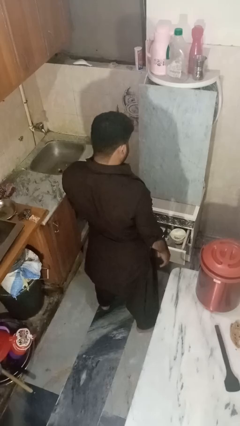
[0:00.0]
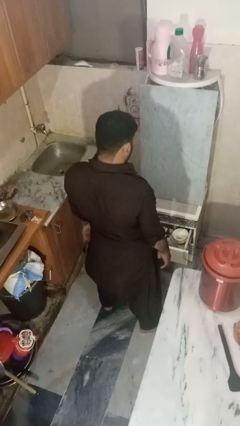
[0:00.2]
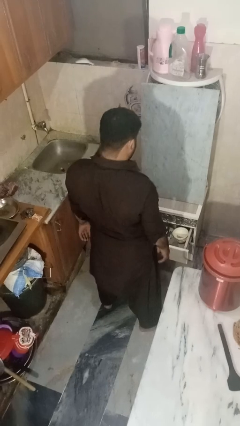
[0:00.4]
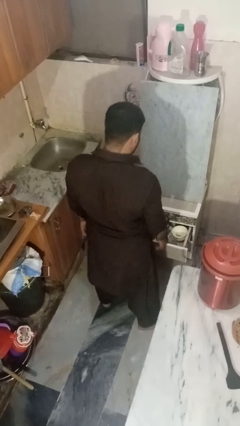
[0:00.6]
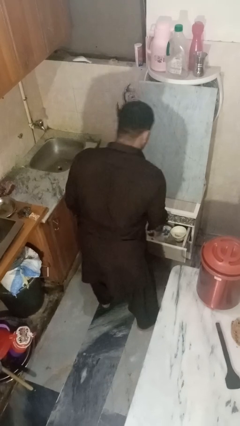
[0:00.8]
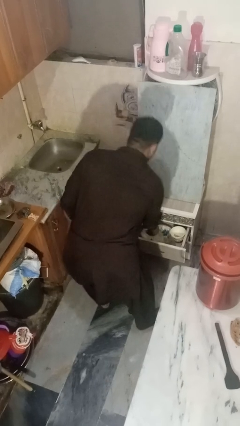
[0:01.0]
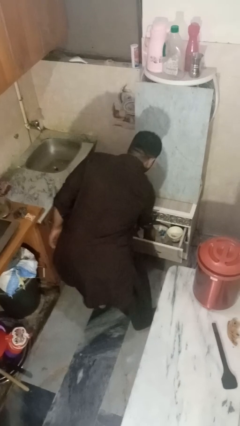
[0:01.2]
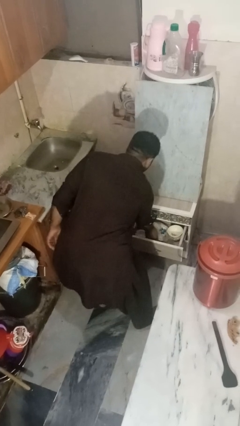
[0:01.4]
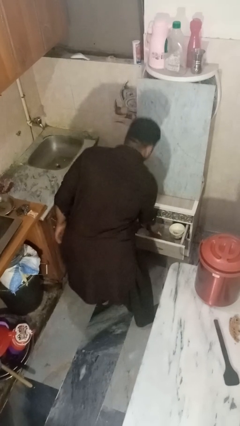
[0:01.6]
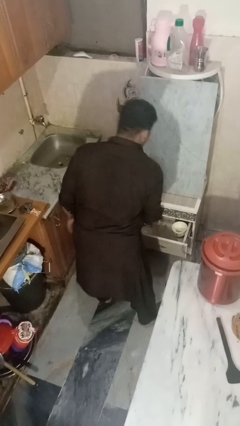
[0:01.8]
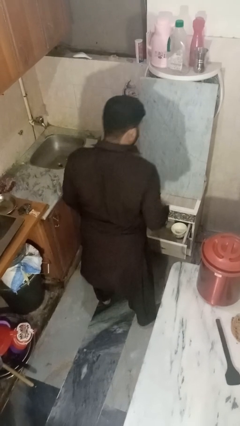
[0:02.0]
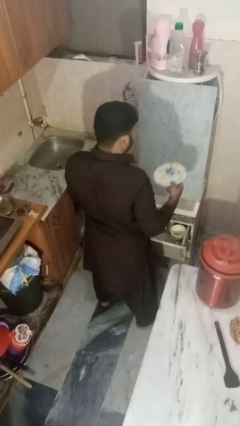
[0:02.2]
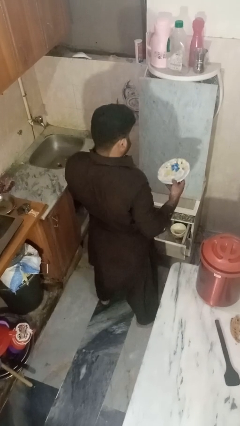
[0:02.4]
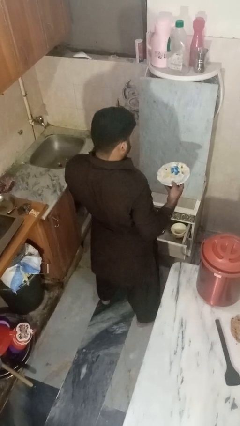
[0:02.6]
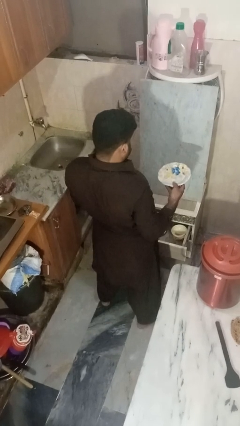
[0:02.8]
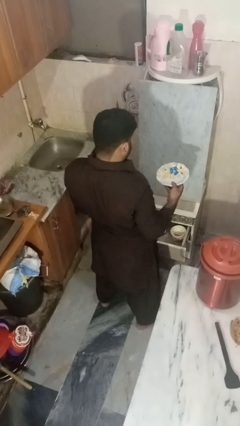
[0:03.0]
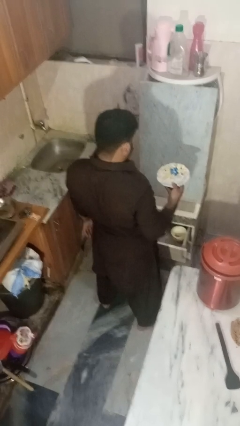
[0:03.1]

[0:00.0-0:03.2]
person takes object from kitchen drawer

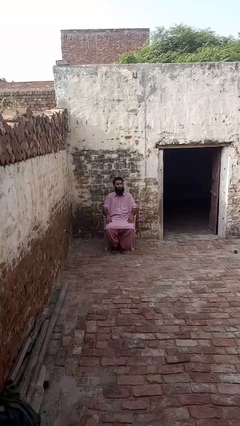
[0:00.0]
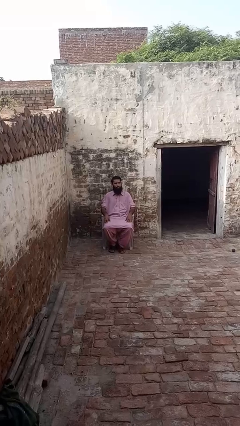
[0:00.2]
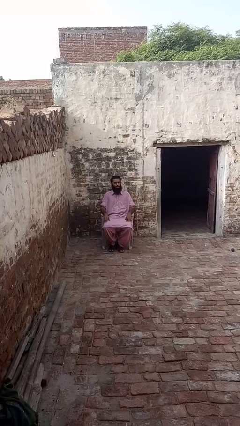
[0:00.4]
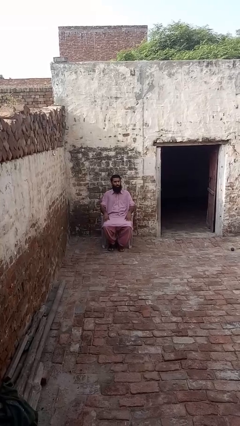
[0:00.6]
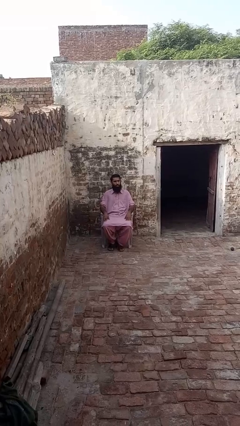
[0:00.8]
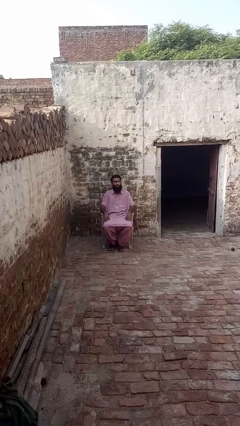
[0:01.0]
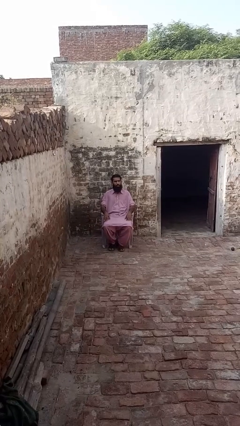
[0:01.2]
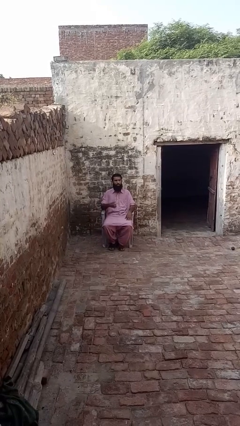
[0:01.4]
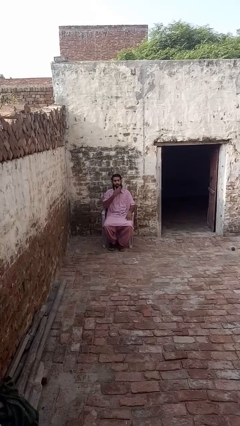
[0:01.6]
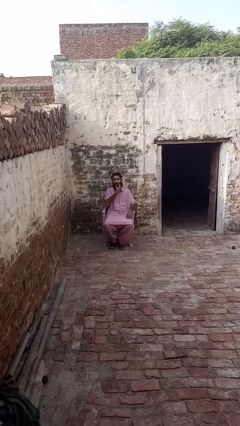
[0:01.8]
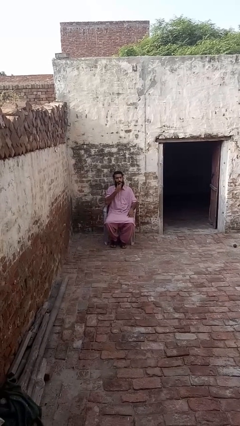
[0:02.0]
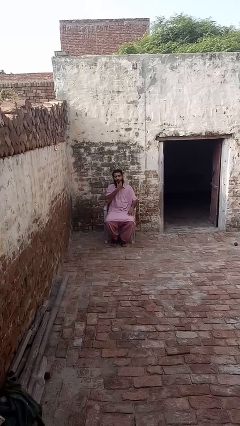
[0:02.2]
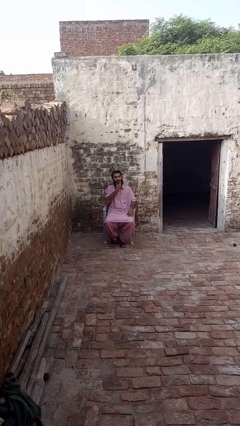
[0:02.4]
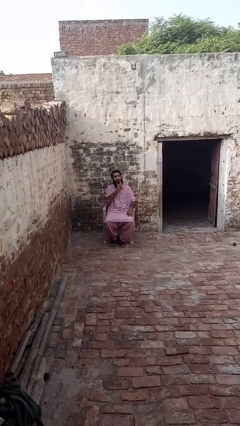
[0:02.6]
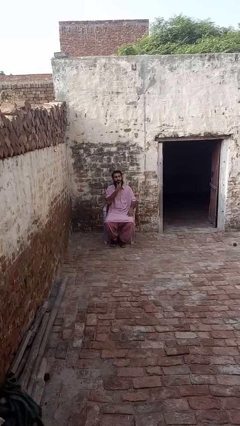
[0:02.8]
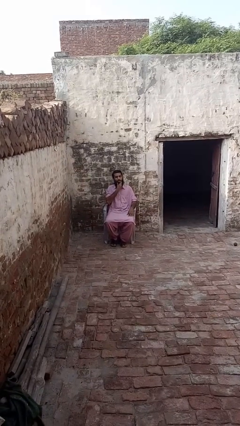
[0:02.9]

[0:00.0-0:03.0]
person strokes chin

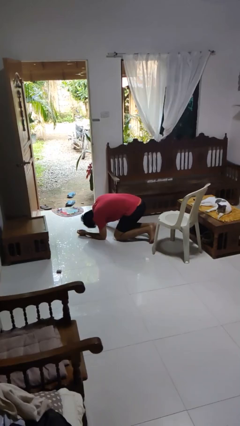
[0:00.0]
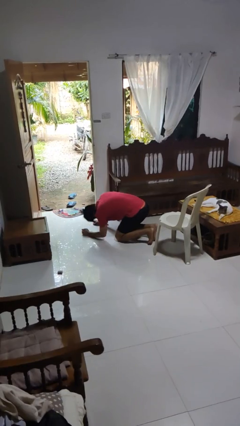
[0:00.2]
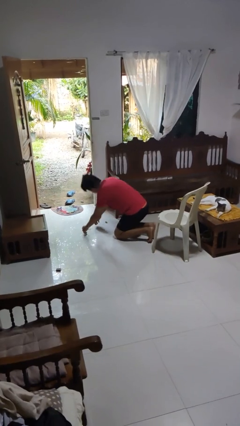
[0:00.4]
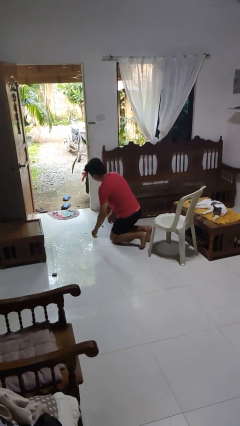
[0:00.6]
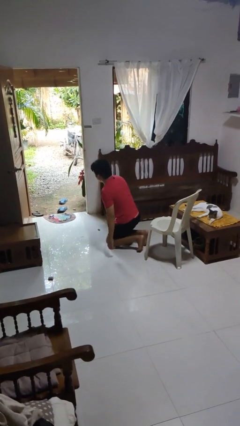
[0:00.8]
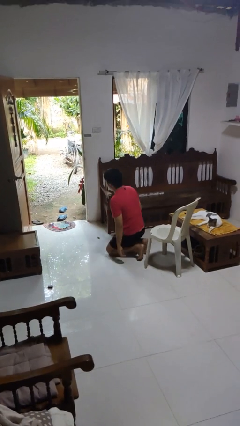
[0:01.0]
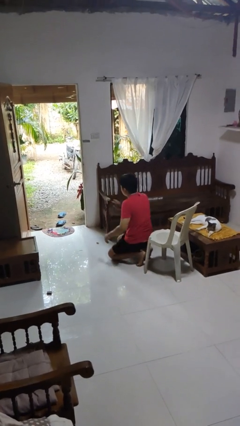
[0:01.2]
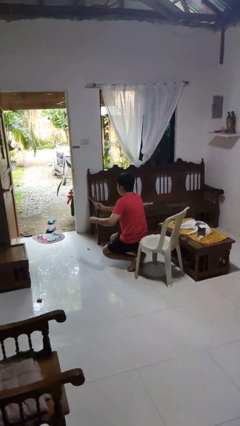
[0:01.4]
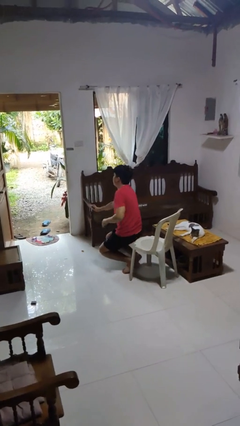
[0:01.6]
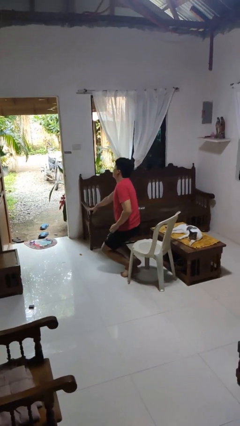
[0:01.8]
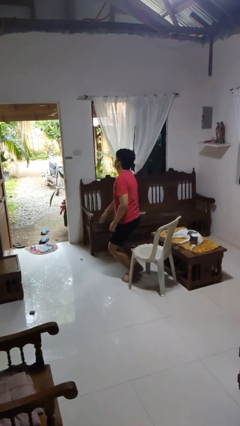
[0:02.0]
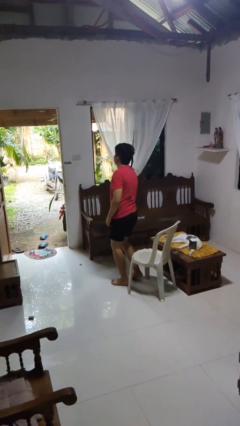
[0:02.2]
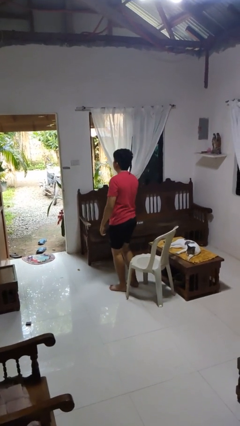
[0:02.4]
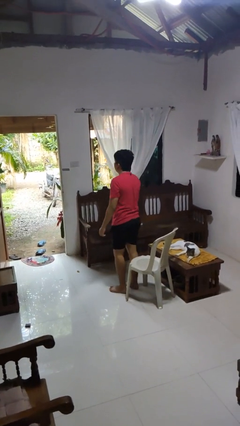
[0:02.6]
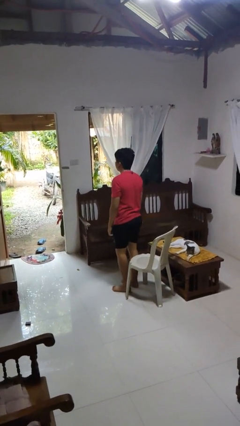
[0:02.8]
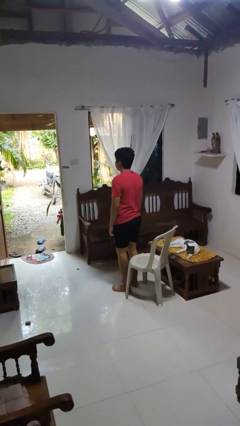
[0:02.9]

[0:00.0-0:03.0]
person stands up from floor

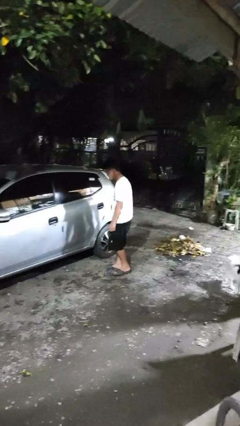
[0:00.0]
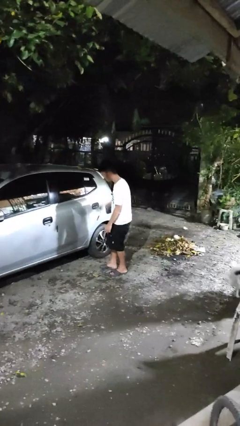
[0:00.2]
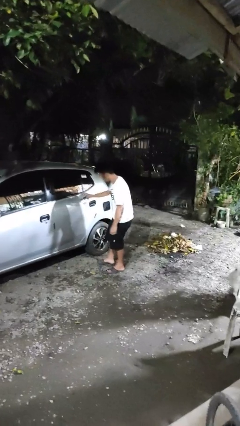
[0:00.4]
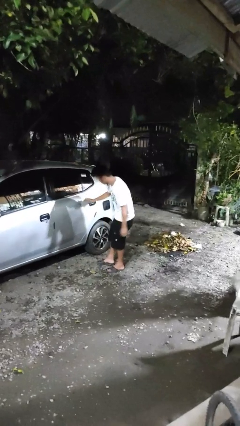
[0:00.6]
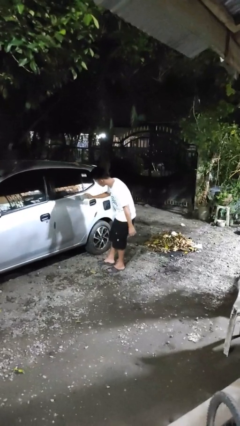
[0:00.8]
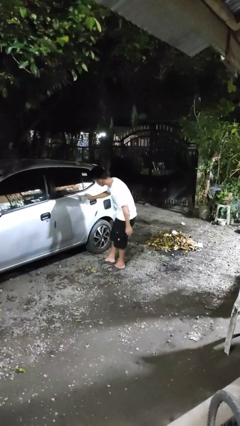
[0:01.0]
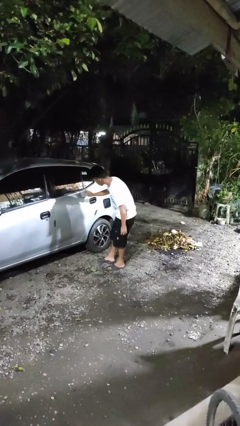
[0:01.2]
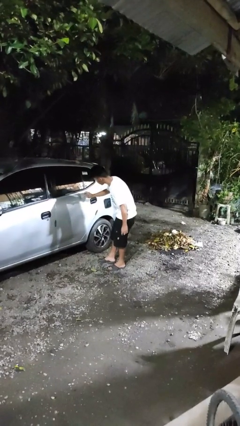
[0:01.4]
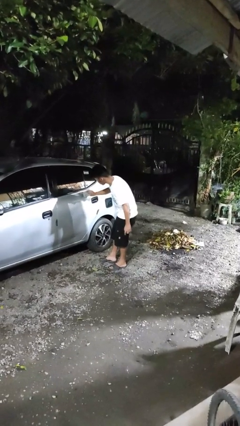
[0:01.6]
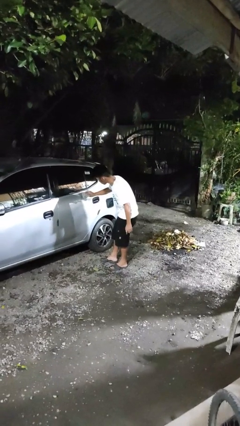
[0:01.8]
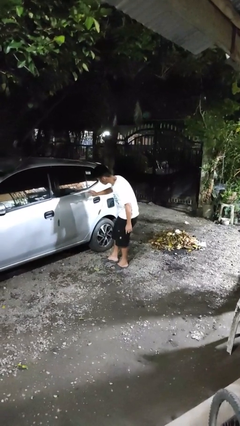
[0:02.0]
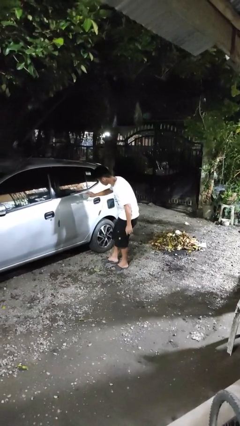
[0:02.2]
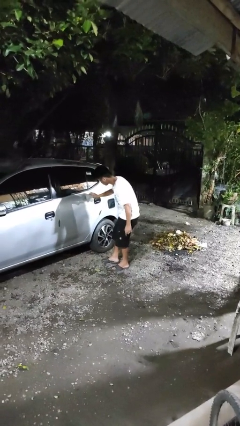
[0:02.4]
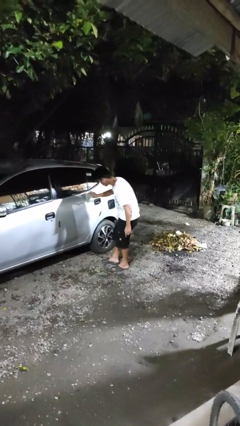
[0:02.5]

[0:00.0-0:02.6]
person polishes car with rag

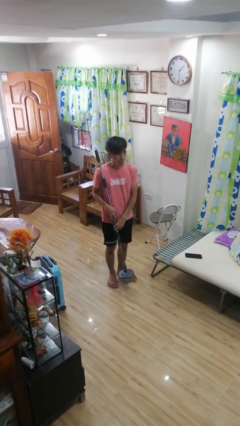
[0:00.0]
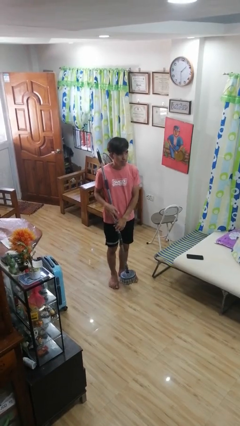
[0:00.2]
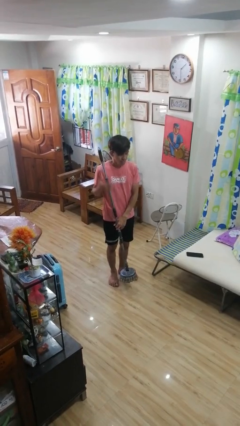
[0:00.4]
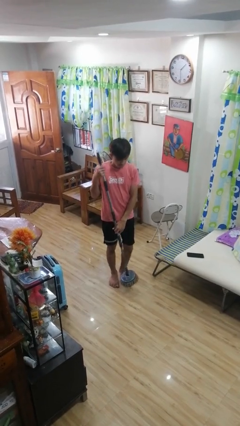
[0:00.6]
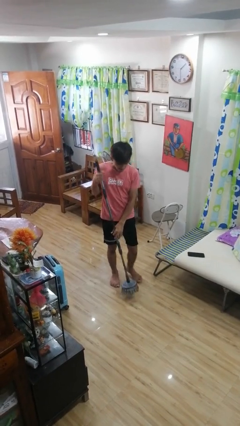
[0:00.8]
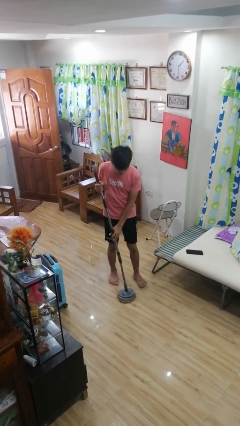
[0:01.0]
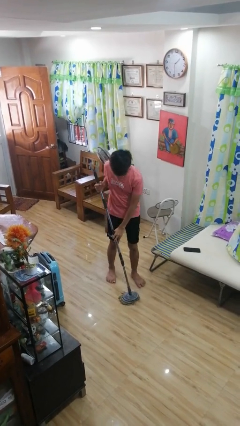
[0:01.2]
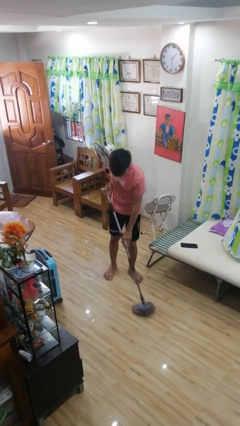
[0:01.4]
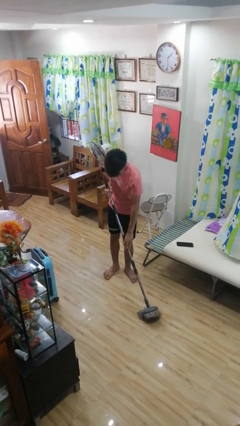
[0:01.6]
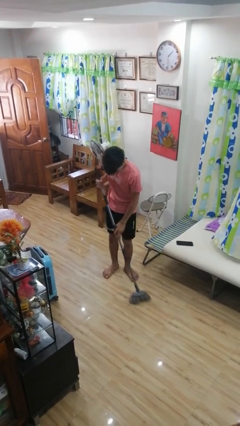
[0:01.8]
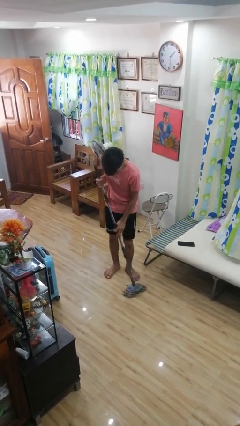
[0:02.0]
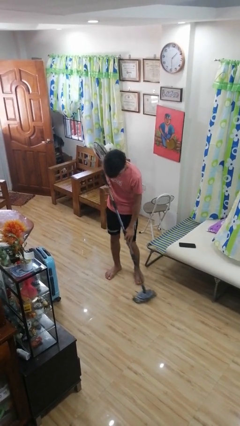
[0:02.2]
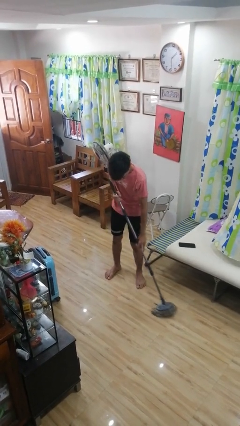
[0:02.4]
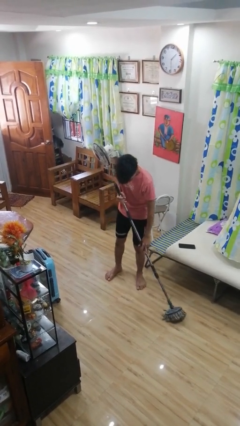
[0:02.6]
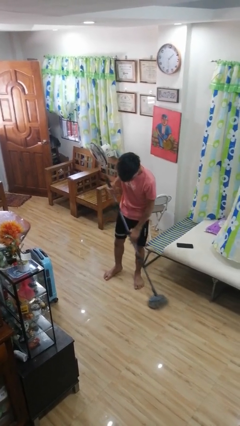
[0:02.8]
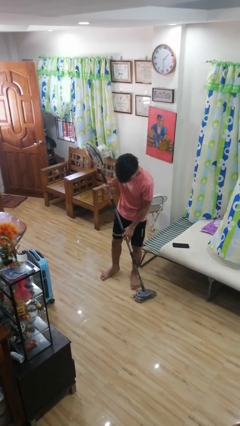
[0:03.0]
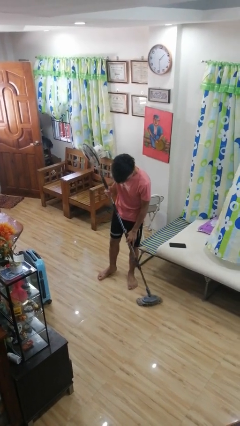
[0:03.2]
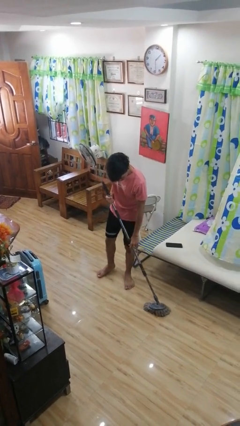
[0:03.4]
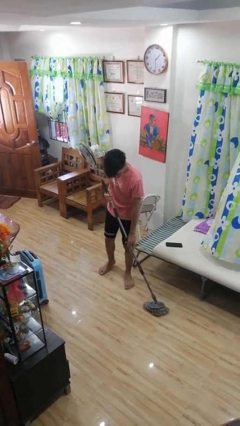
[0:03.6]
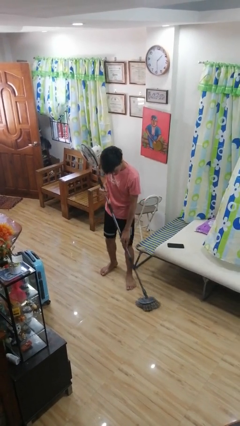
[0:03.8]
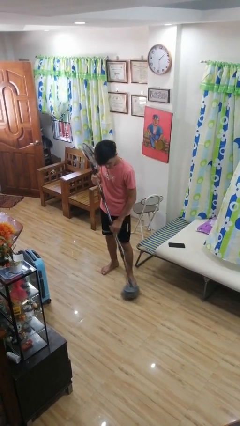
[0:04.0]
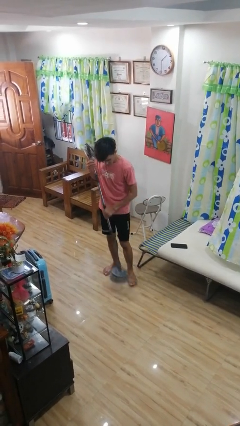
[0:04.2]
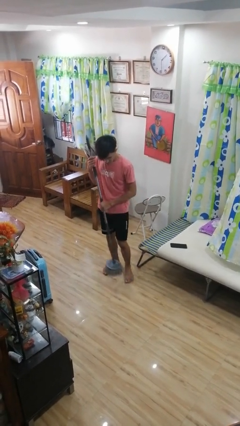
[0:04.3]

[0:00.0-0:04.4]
person mops

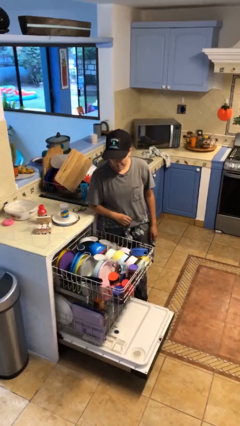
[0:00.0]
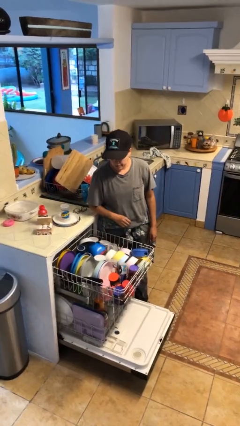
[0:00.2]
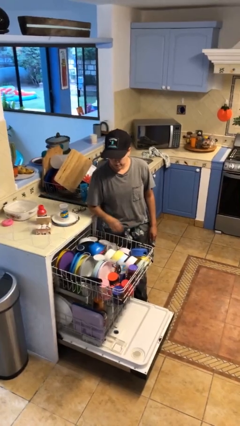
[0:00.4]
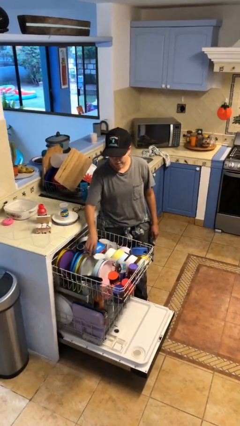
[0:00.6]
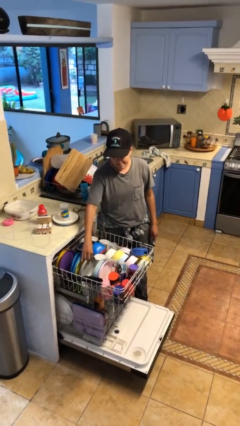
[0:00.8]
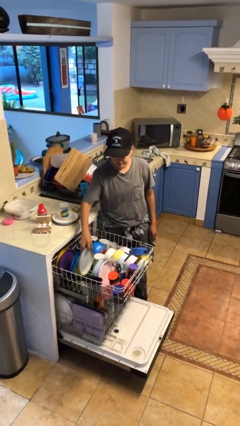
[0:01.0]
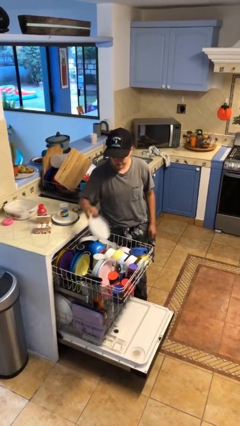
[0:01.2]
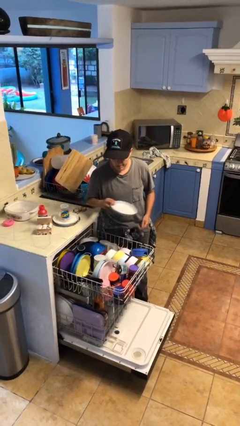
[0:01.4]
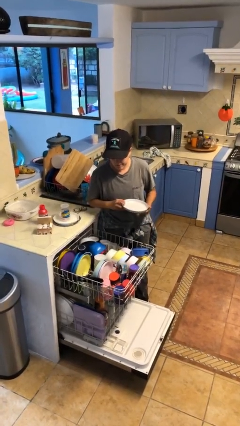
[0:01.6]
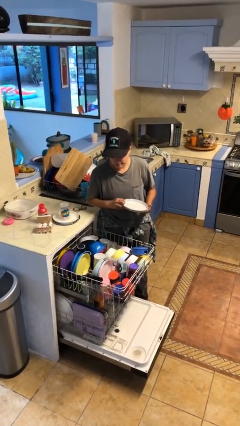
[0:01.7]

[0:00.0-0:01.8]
person unloads dishwasher
